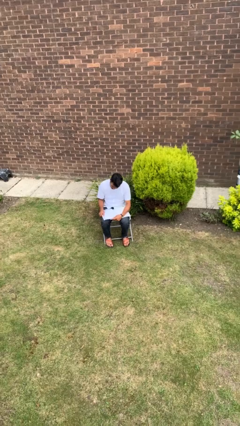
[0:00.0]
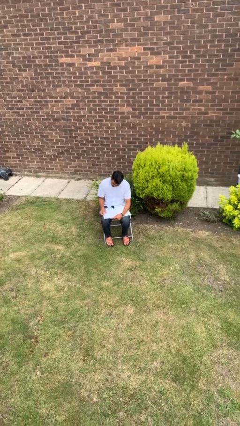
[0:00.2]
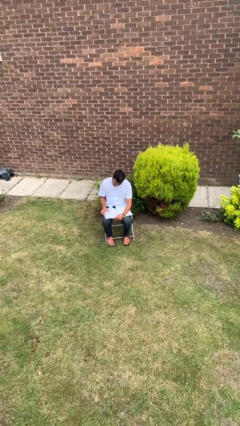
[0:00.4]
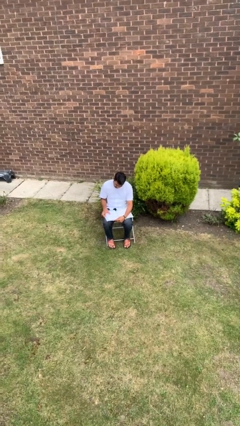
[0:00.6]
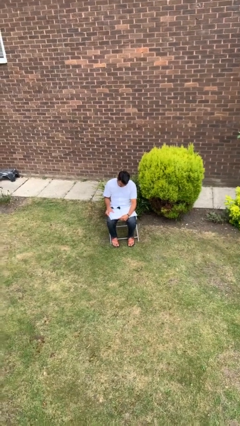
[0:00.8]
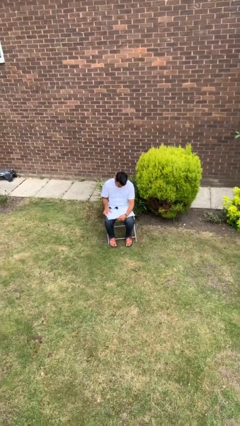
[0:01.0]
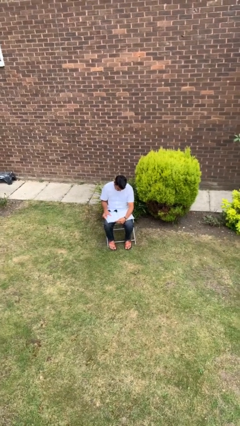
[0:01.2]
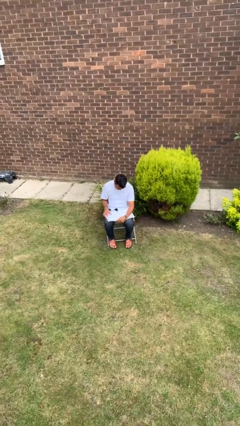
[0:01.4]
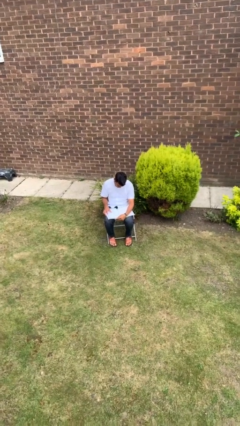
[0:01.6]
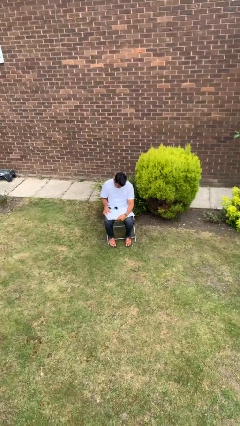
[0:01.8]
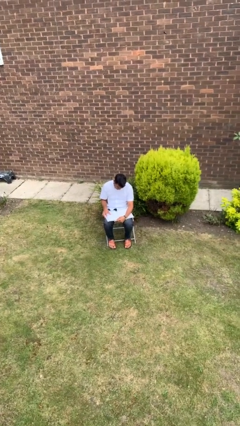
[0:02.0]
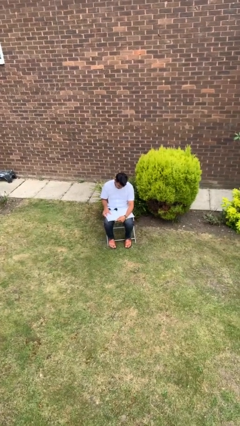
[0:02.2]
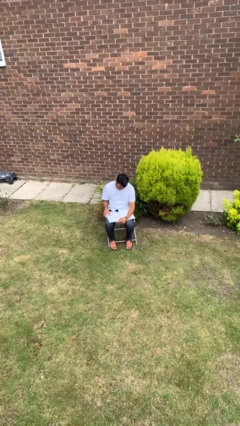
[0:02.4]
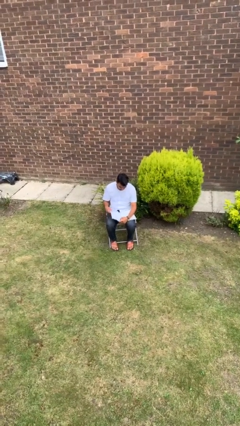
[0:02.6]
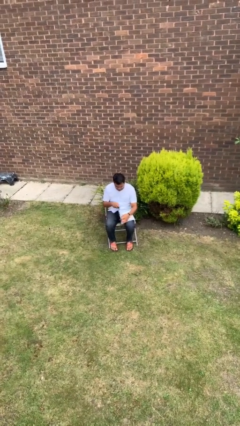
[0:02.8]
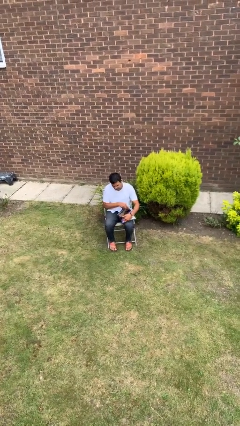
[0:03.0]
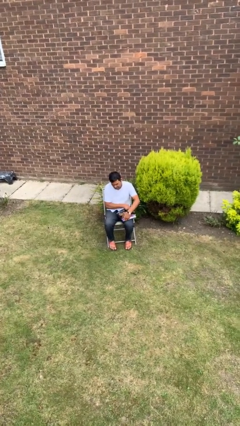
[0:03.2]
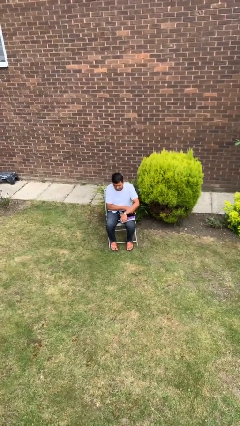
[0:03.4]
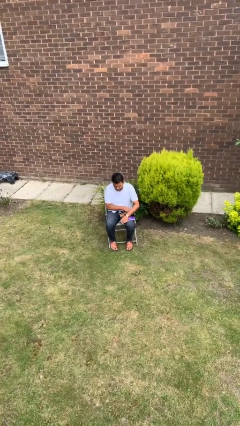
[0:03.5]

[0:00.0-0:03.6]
person reads book

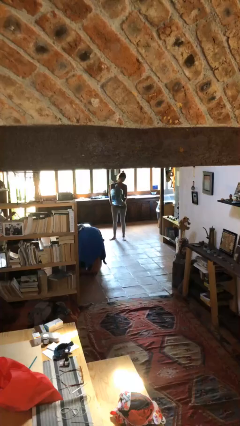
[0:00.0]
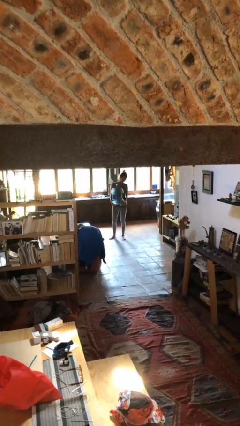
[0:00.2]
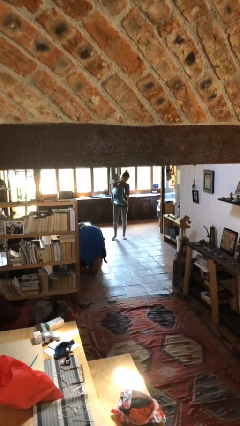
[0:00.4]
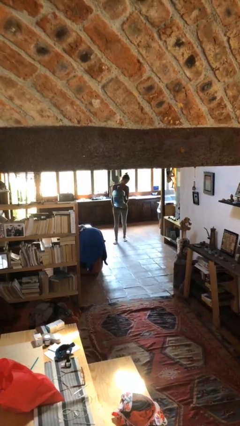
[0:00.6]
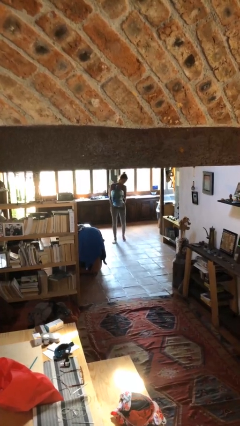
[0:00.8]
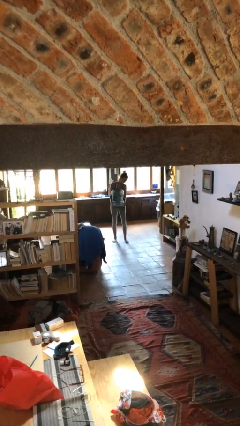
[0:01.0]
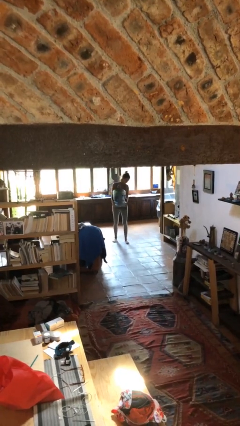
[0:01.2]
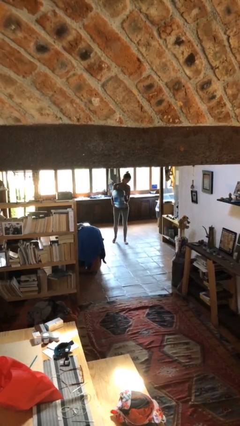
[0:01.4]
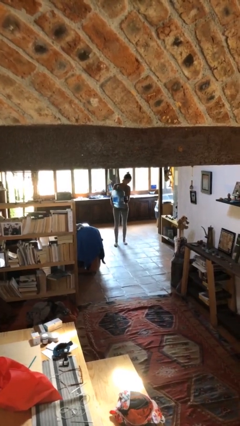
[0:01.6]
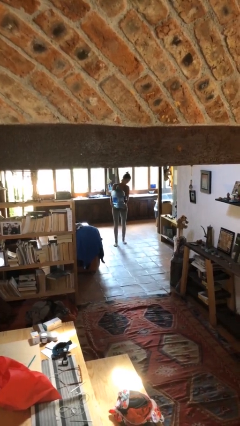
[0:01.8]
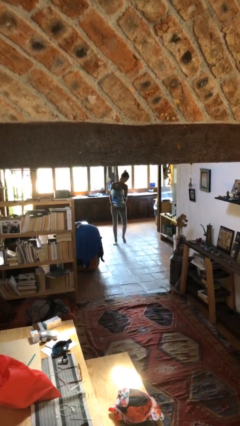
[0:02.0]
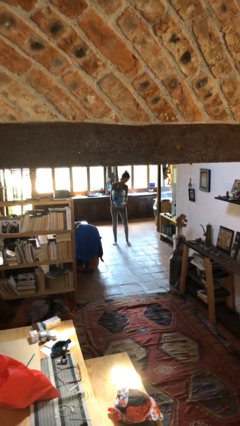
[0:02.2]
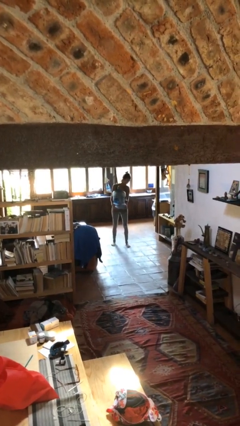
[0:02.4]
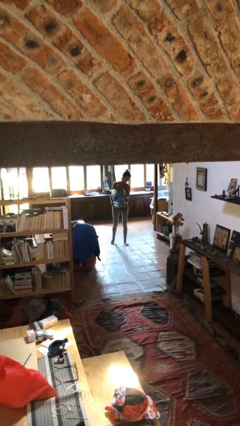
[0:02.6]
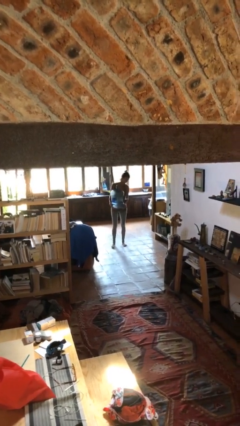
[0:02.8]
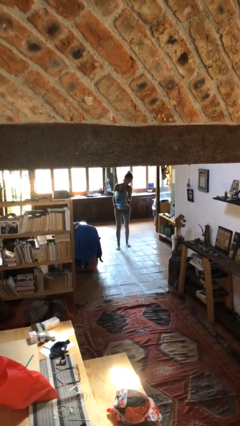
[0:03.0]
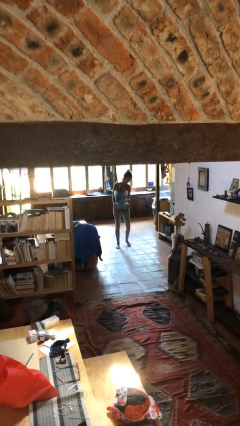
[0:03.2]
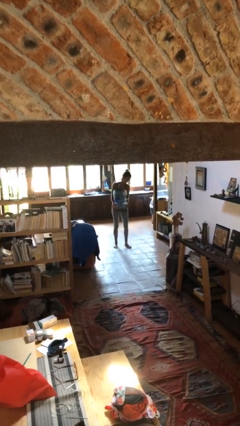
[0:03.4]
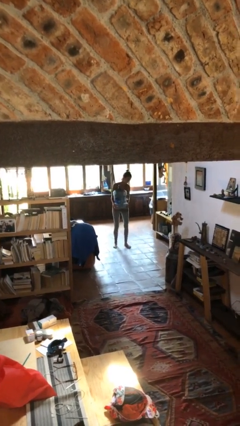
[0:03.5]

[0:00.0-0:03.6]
person carries heavy object

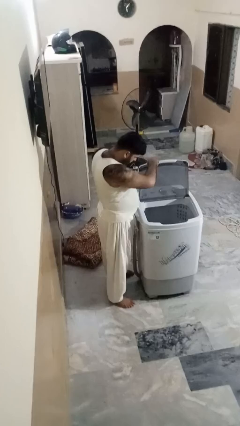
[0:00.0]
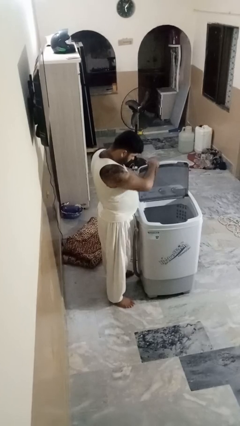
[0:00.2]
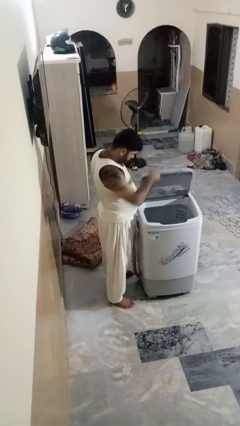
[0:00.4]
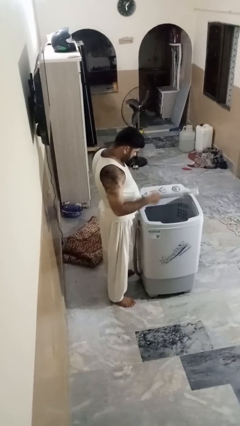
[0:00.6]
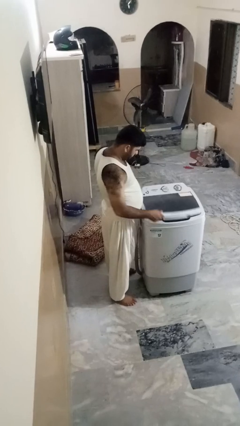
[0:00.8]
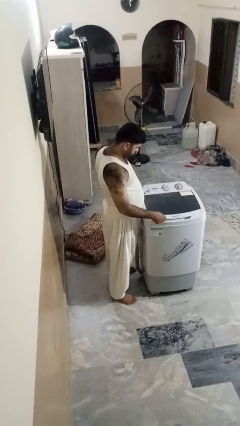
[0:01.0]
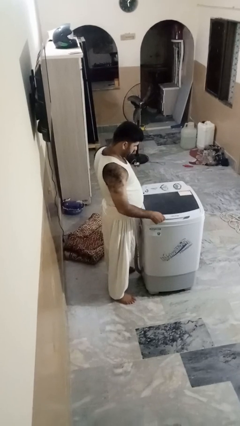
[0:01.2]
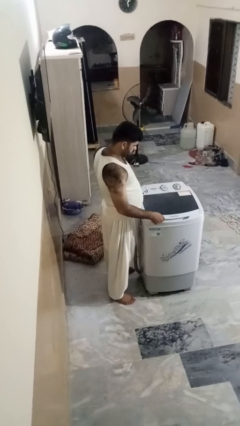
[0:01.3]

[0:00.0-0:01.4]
person closes clothes washer

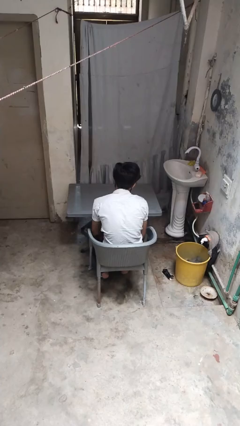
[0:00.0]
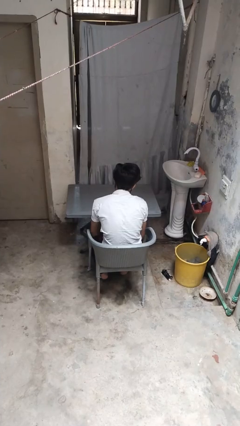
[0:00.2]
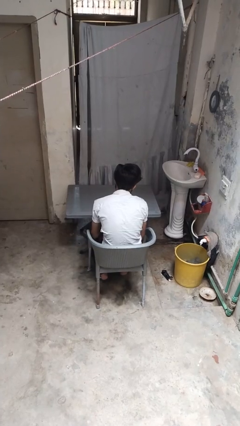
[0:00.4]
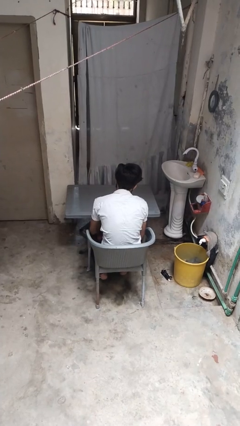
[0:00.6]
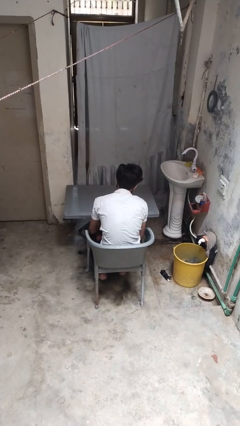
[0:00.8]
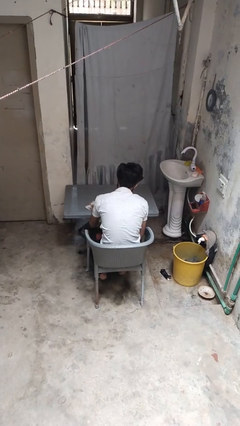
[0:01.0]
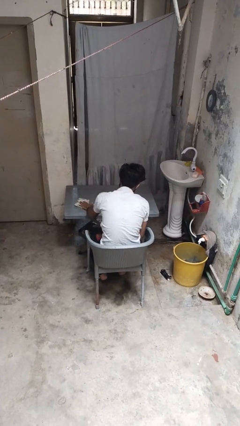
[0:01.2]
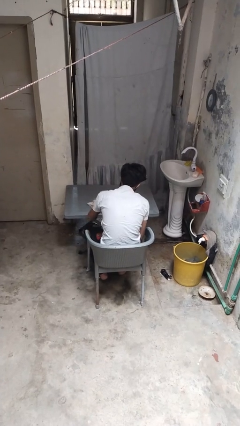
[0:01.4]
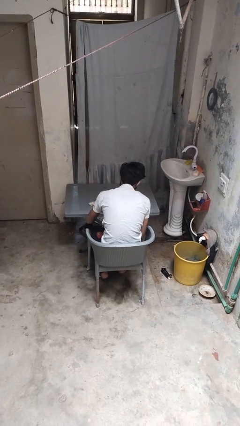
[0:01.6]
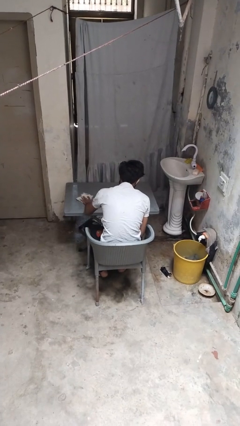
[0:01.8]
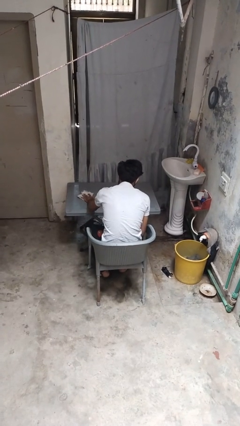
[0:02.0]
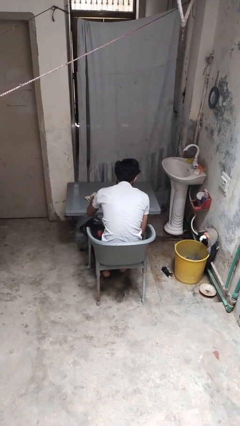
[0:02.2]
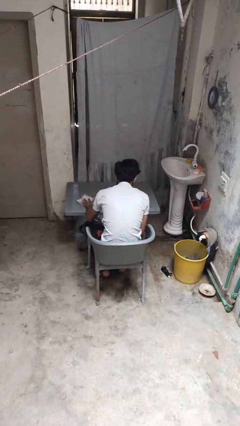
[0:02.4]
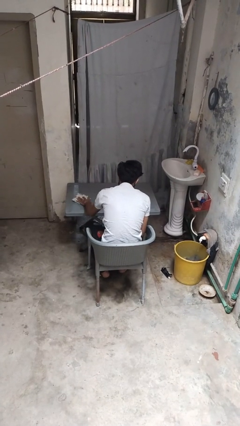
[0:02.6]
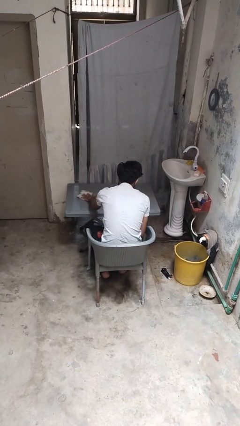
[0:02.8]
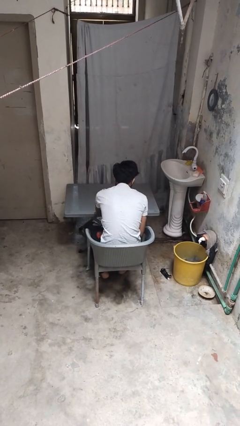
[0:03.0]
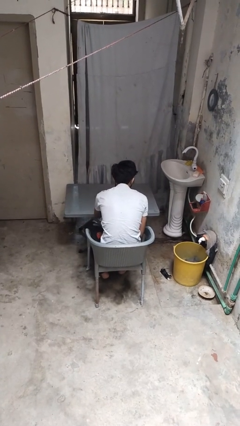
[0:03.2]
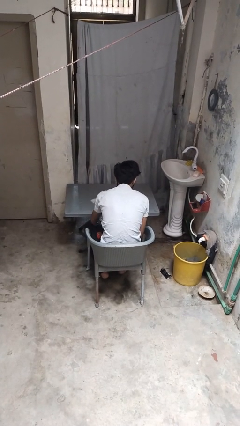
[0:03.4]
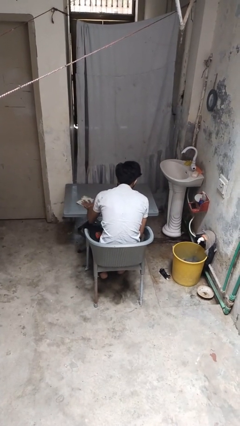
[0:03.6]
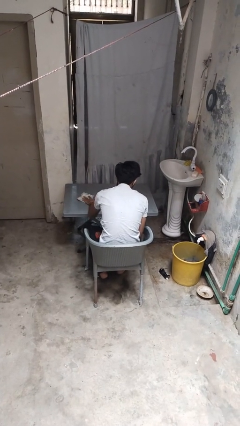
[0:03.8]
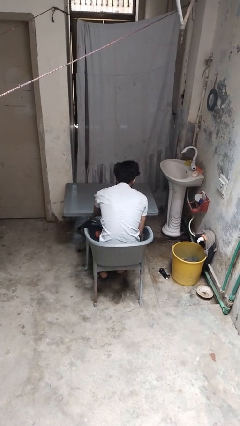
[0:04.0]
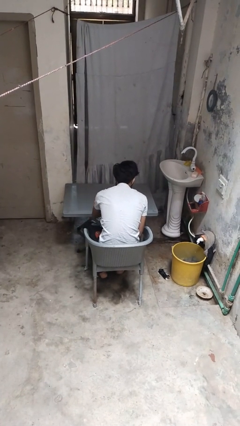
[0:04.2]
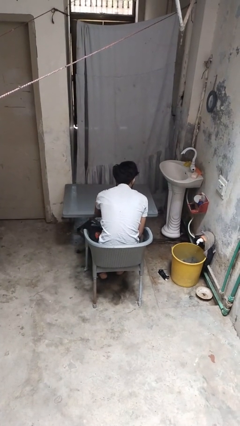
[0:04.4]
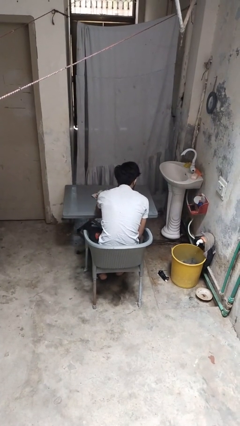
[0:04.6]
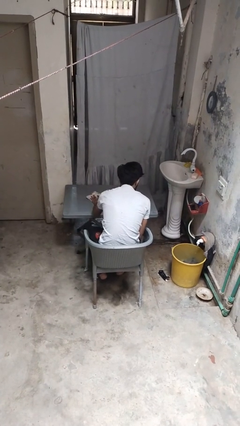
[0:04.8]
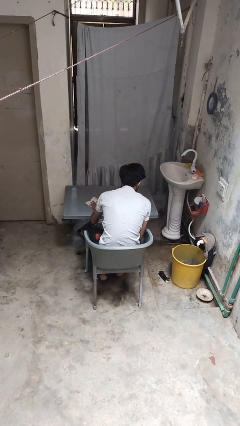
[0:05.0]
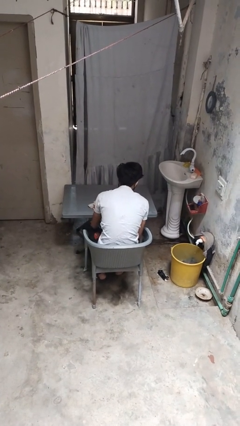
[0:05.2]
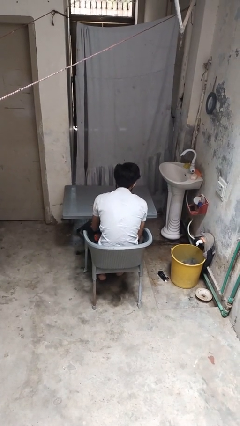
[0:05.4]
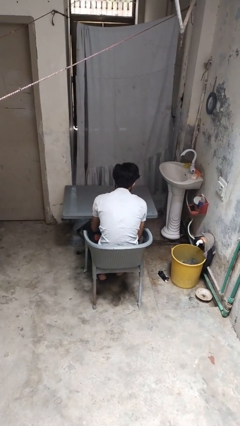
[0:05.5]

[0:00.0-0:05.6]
person cleans table with rag

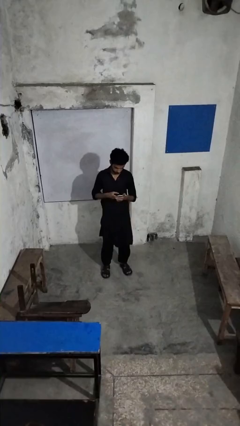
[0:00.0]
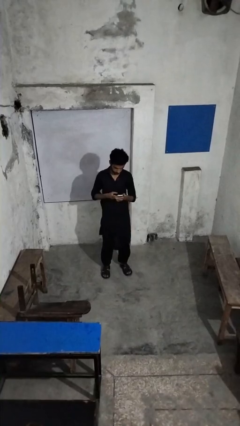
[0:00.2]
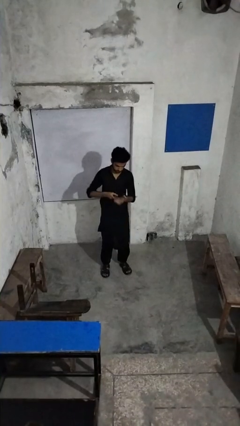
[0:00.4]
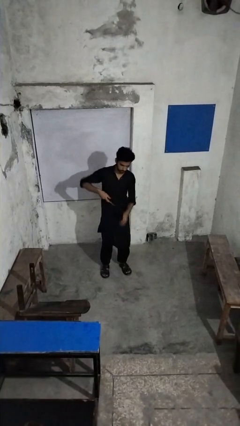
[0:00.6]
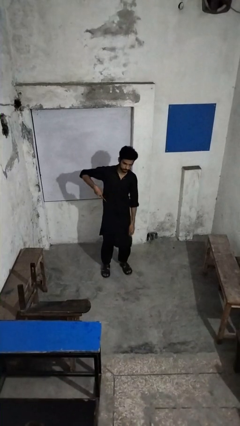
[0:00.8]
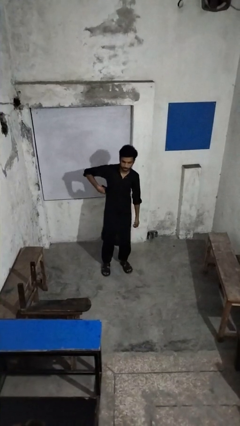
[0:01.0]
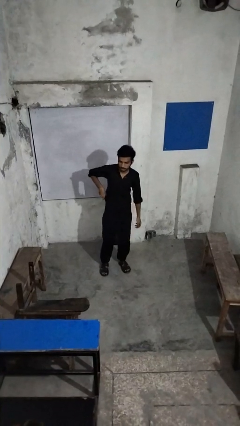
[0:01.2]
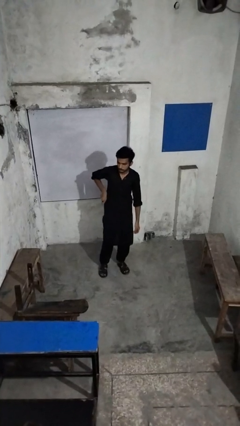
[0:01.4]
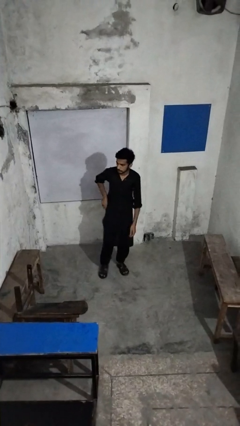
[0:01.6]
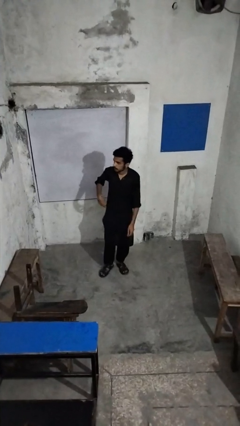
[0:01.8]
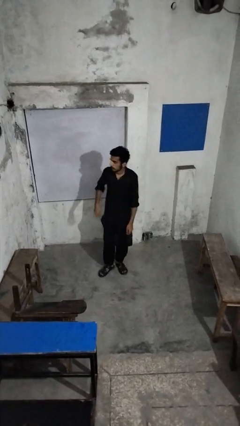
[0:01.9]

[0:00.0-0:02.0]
person puts phone into pocket

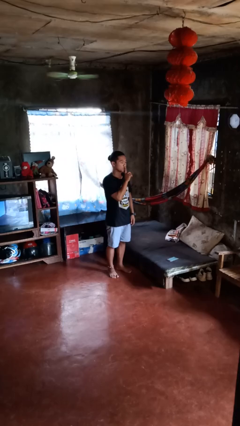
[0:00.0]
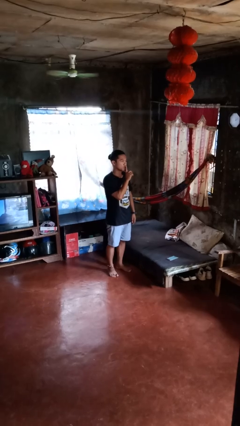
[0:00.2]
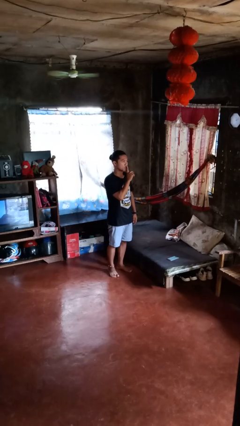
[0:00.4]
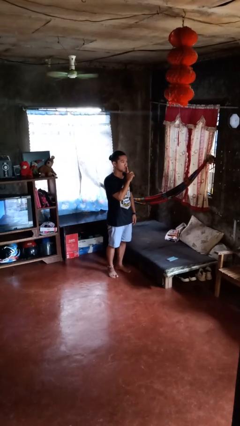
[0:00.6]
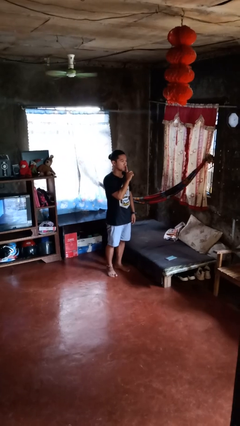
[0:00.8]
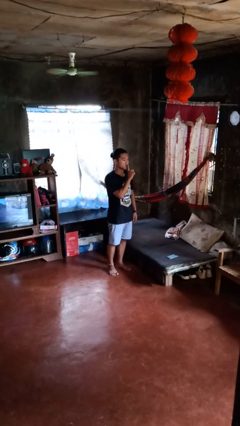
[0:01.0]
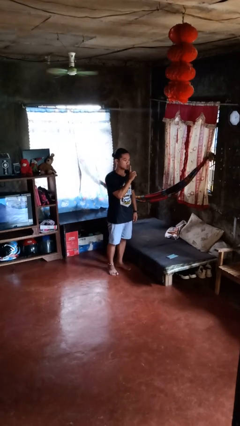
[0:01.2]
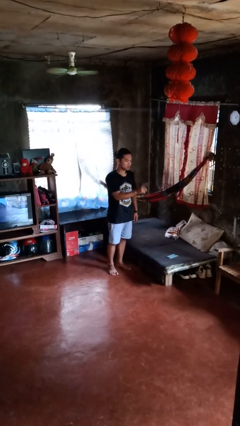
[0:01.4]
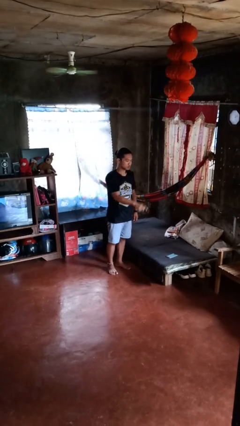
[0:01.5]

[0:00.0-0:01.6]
person gestures be quiet
